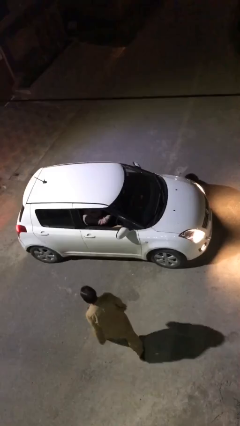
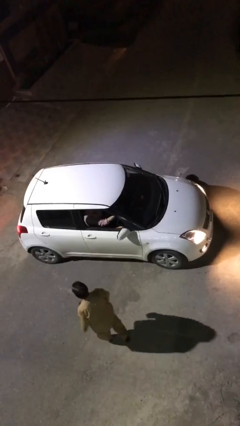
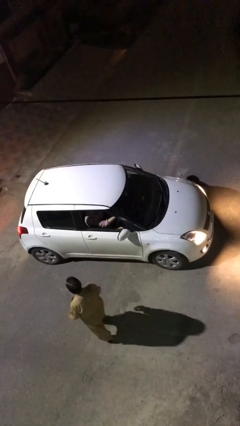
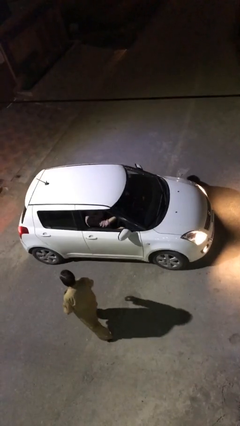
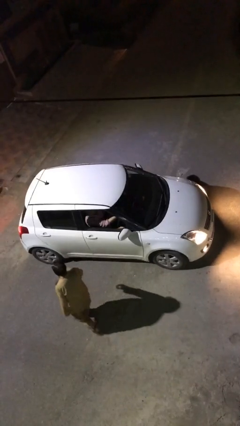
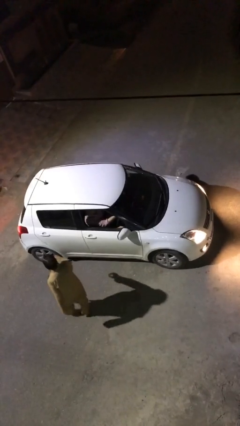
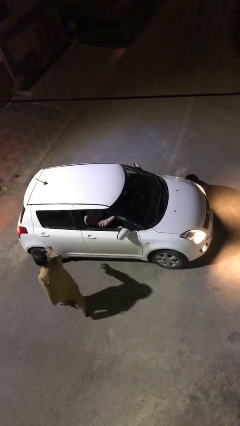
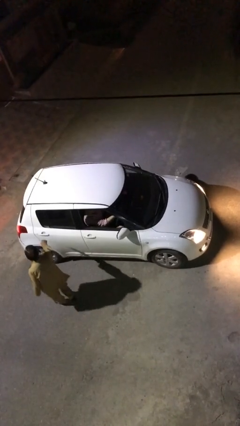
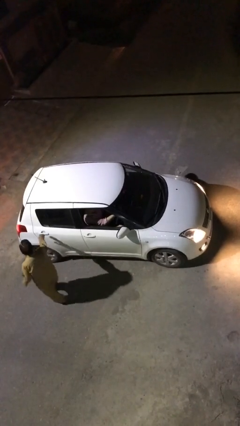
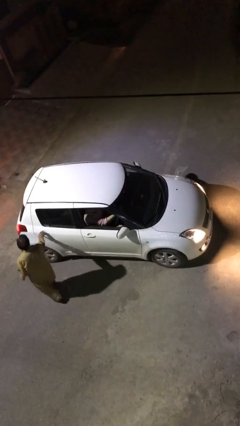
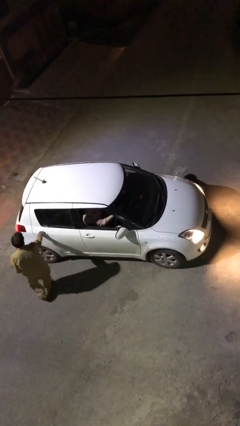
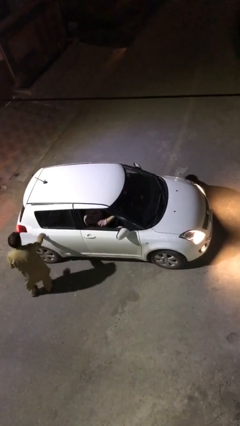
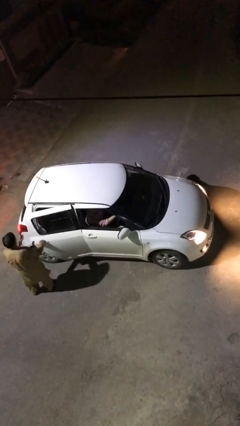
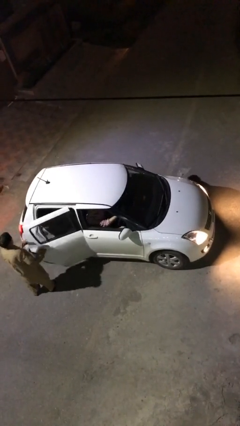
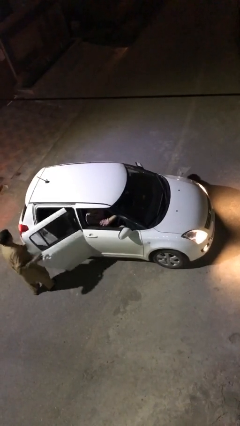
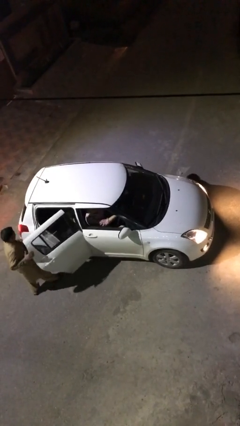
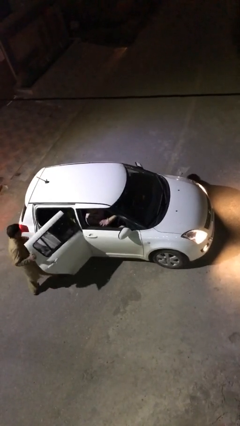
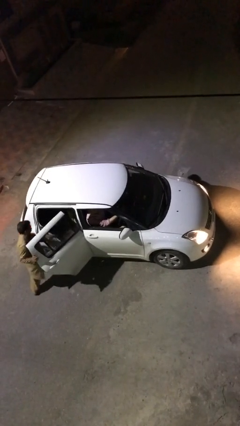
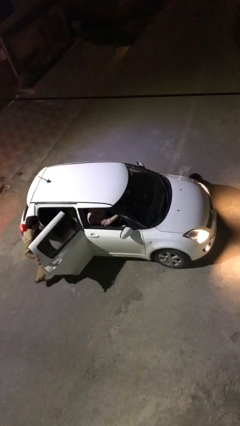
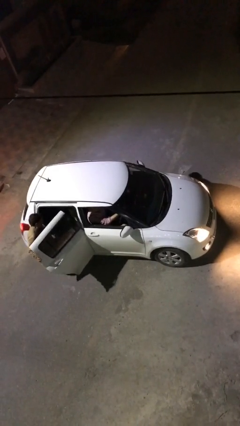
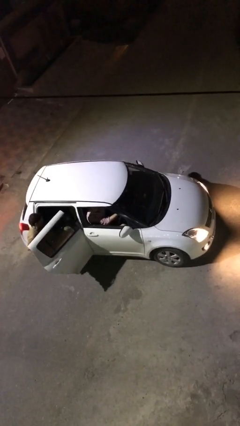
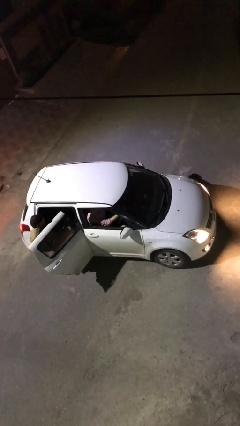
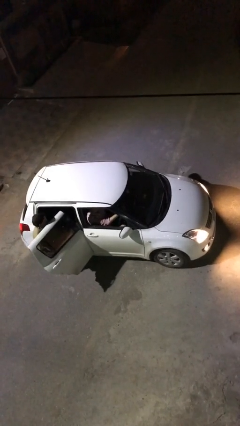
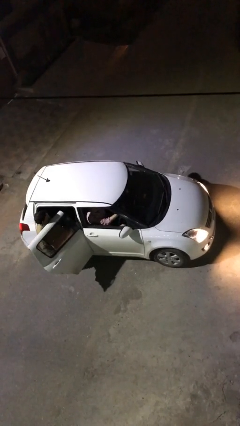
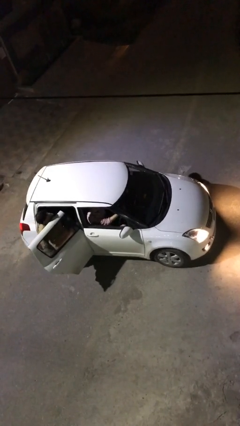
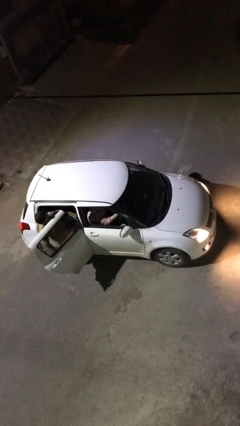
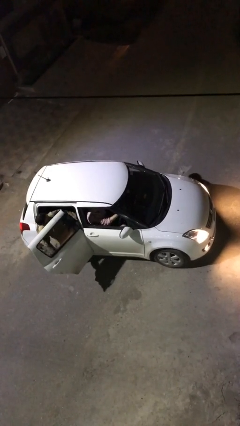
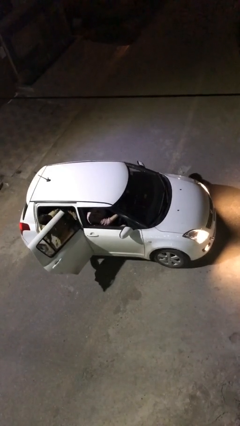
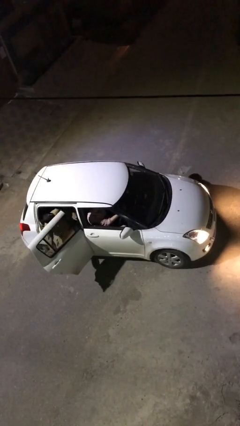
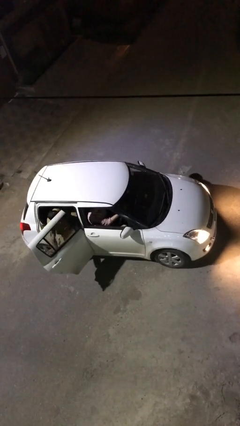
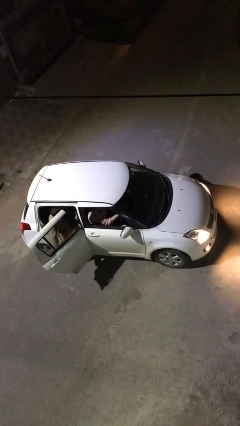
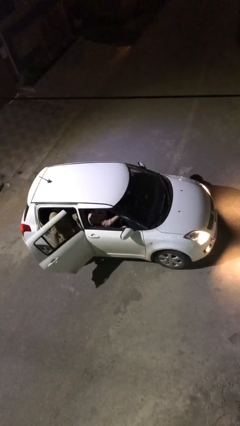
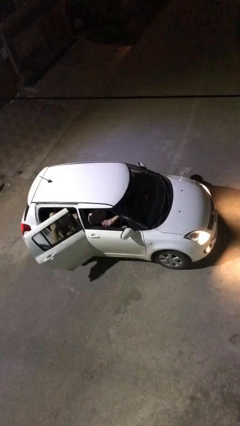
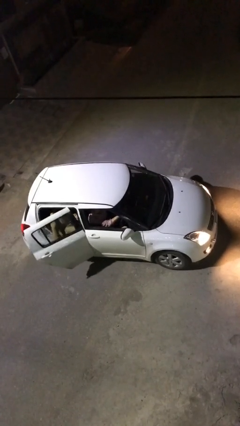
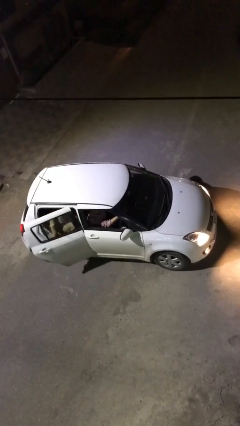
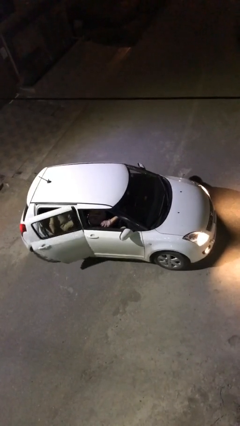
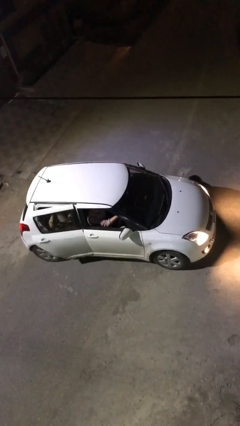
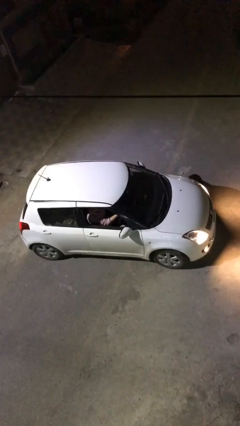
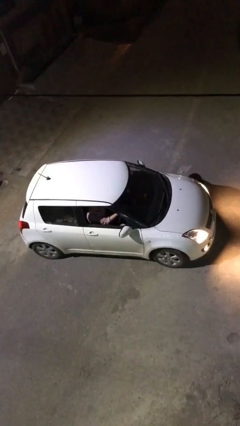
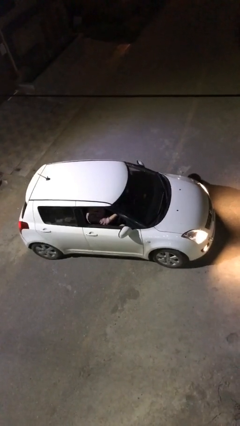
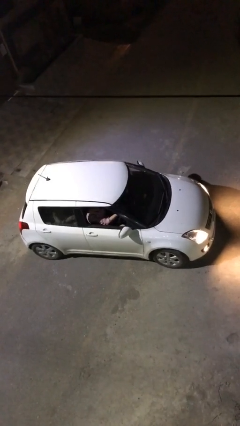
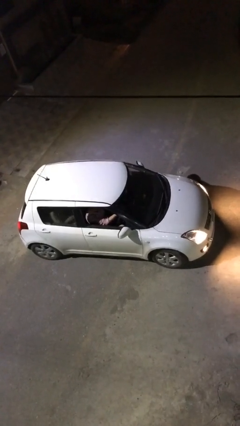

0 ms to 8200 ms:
car picks up person

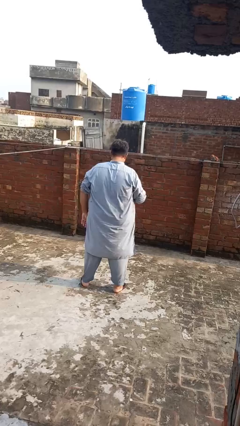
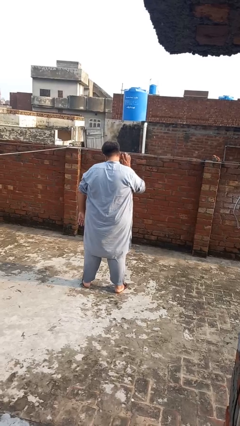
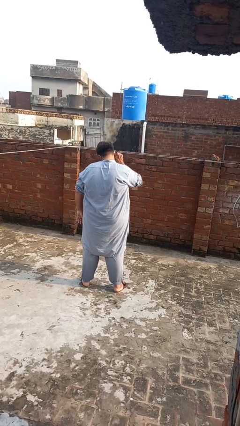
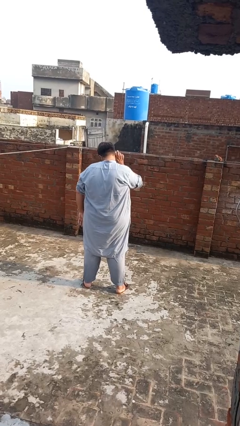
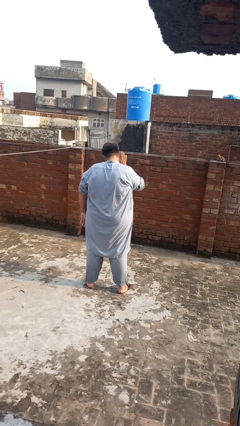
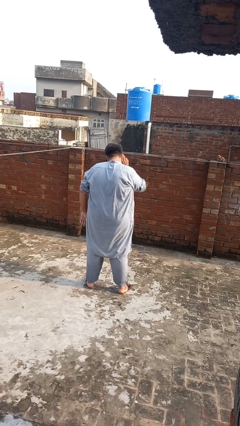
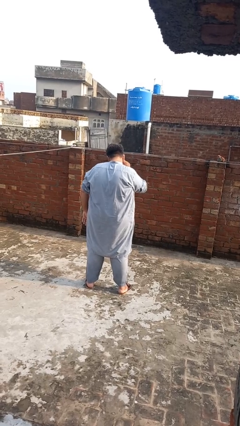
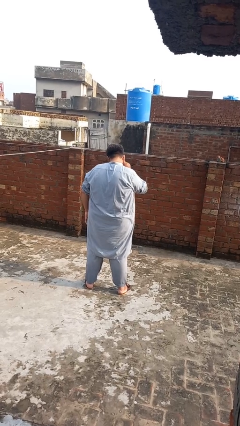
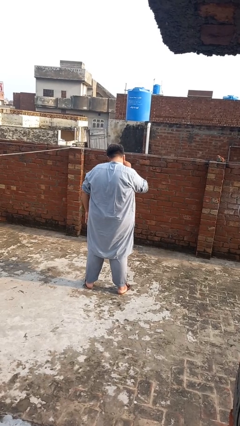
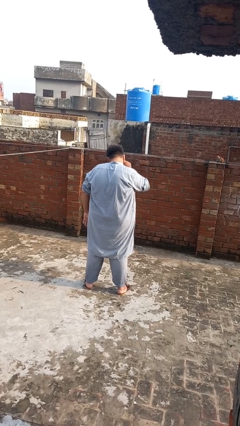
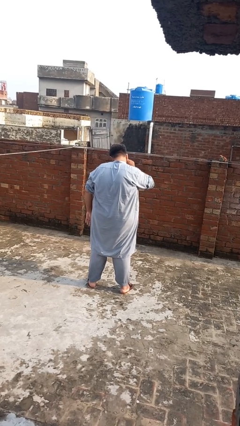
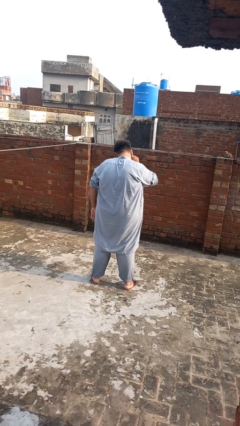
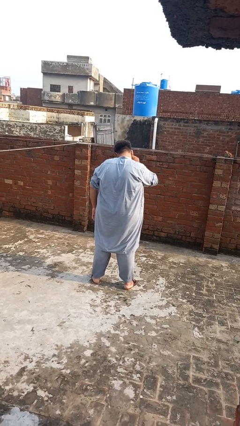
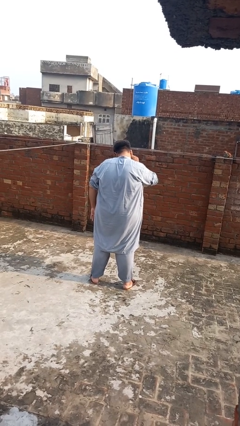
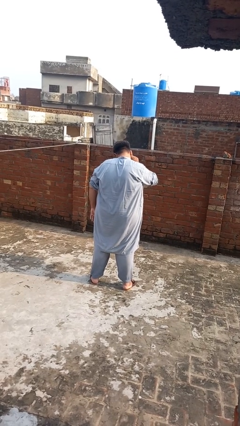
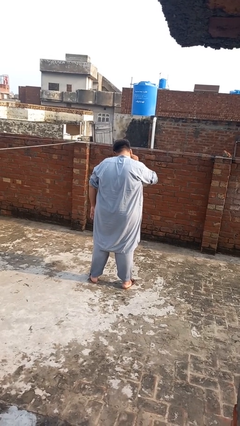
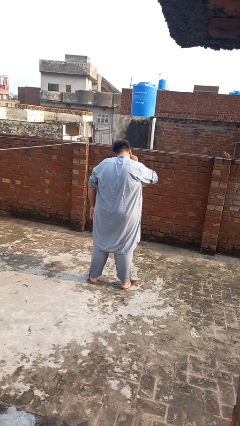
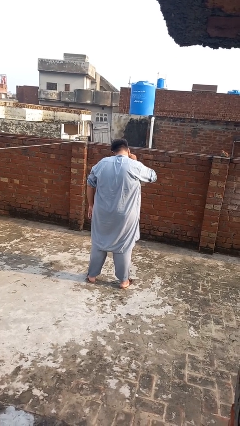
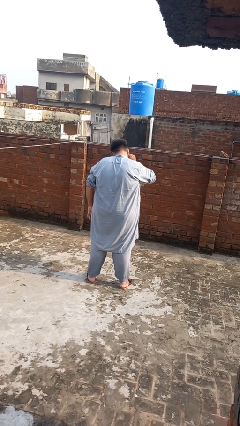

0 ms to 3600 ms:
person gestures listen closely

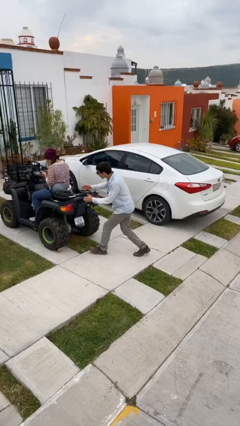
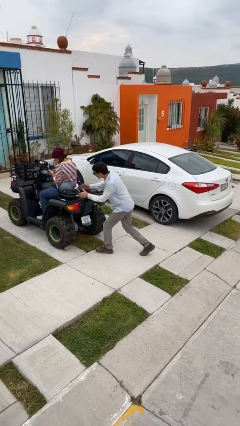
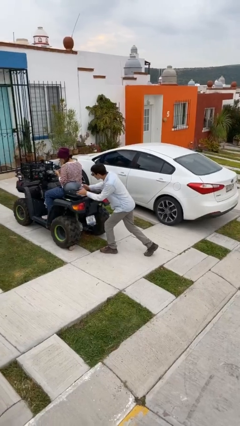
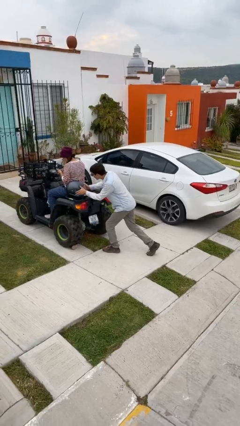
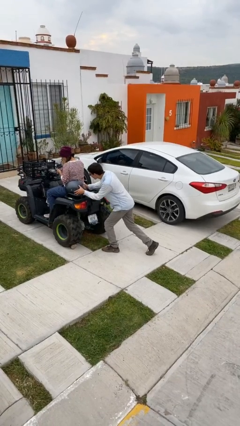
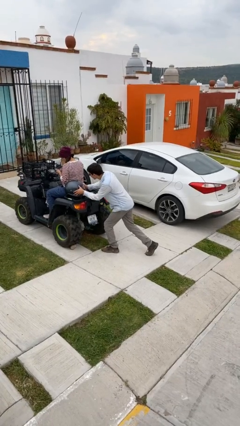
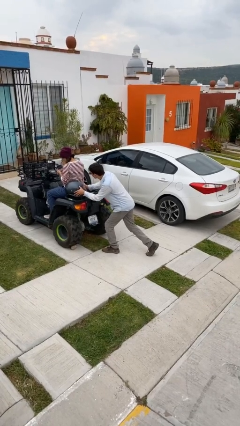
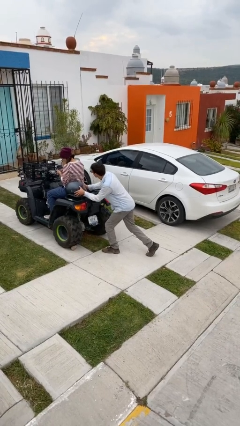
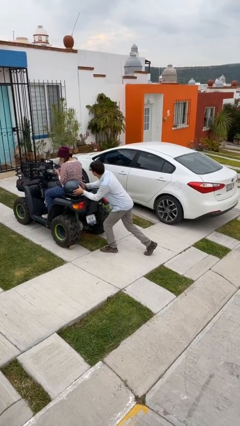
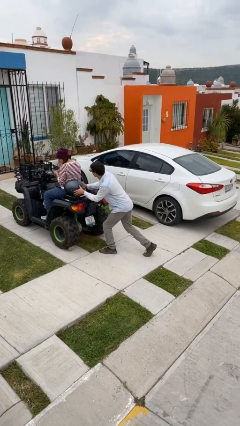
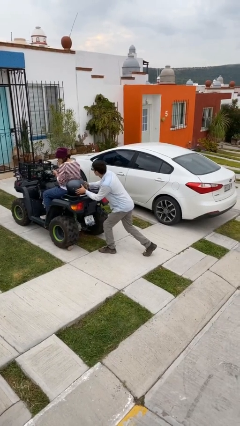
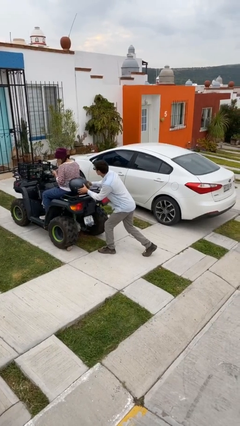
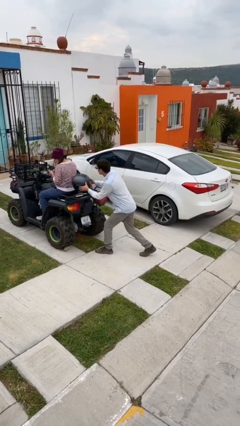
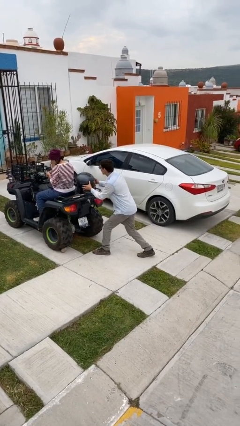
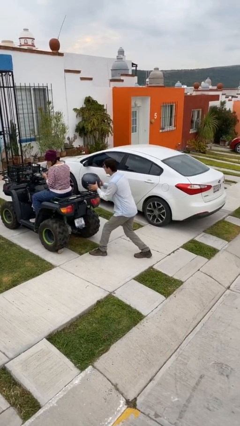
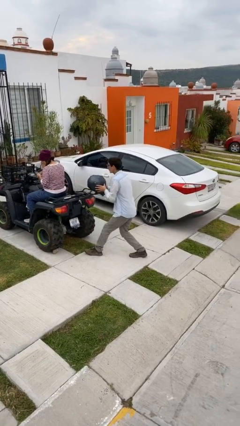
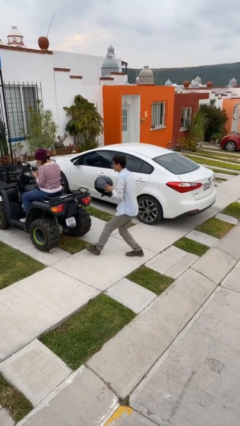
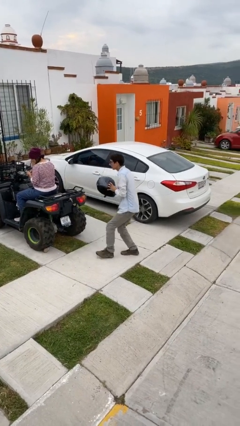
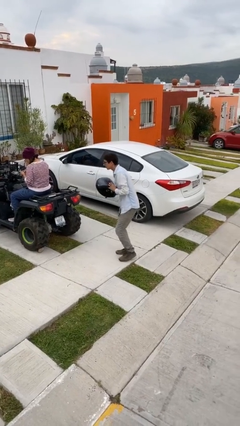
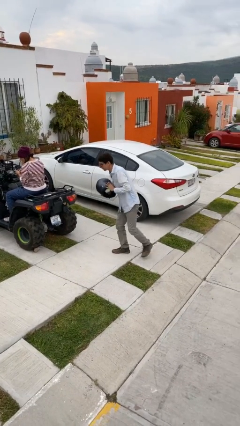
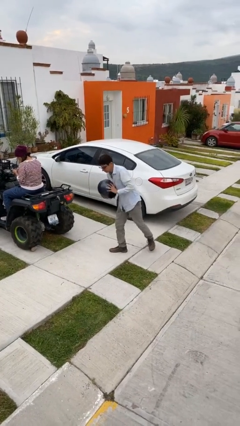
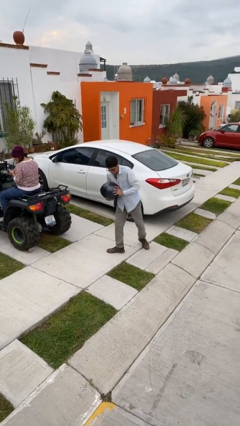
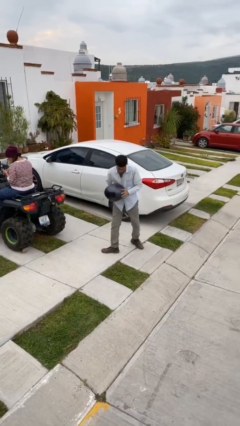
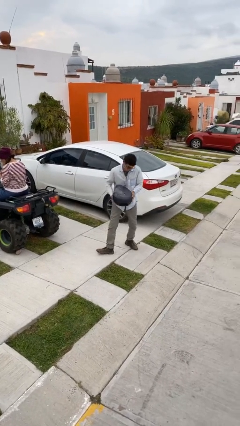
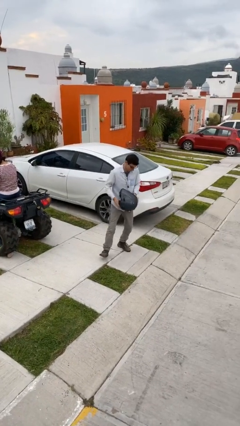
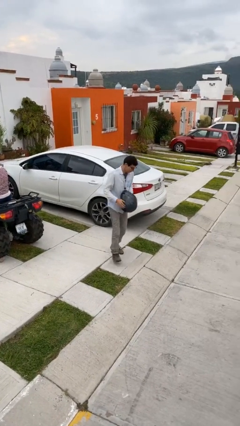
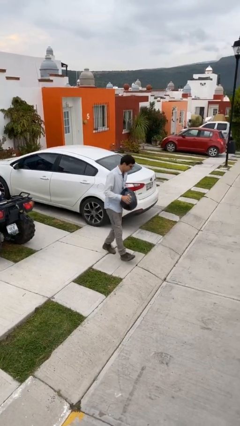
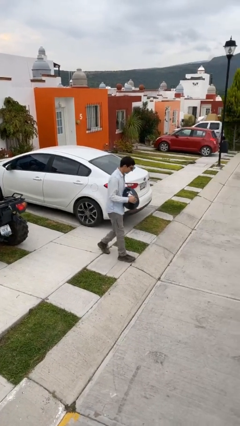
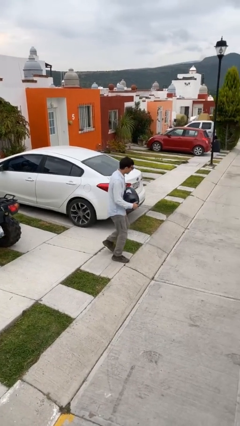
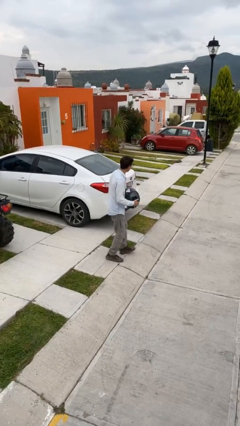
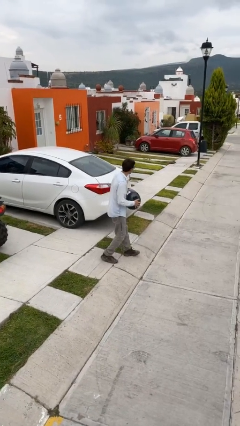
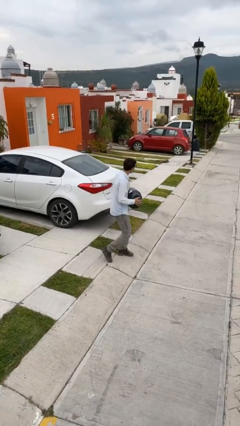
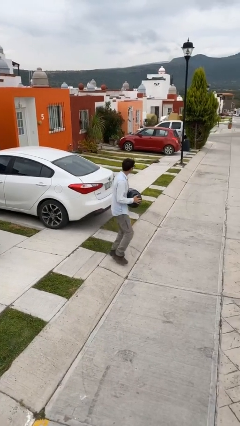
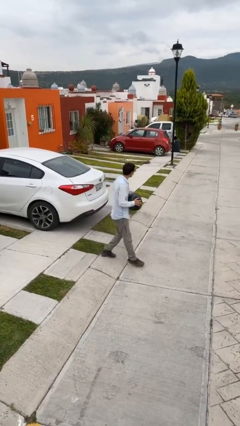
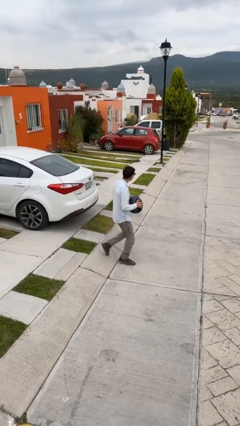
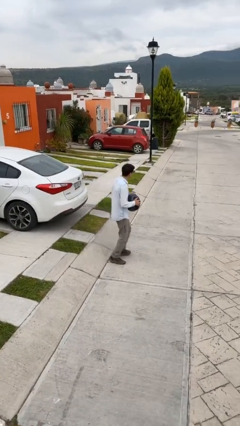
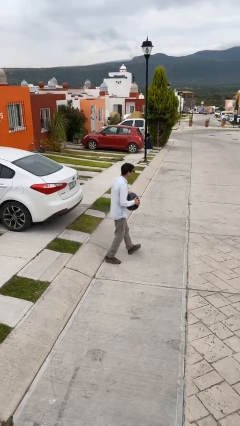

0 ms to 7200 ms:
person steals object from person
